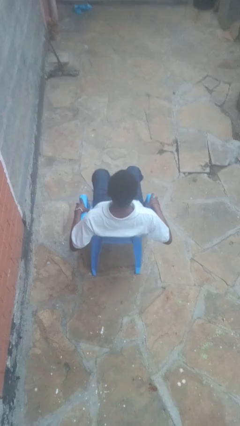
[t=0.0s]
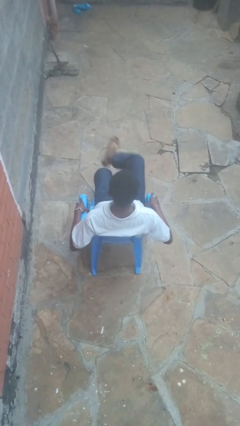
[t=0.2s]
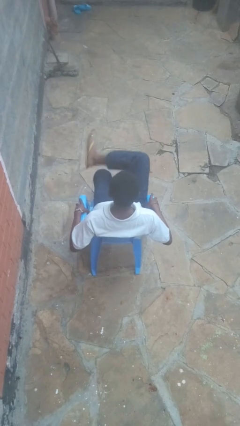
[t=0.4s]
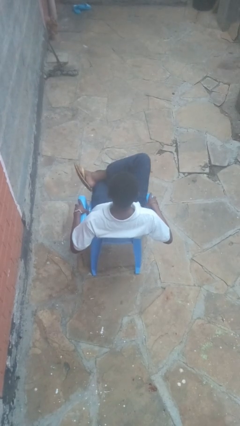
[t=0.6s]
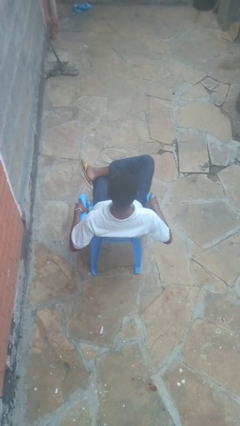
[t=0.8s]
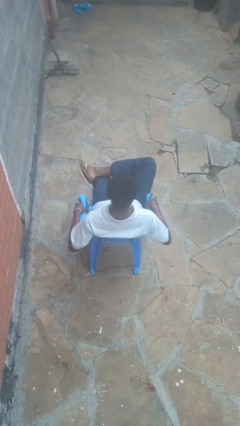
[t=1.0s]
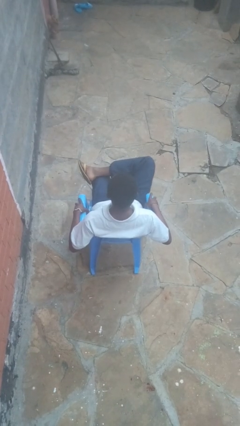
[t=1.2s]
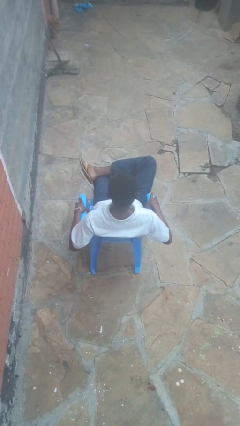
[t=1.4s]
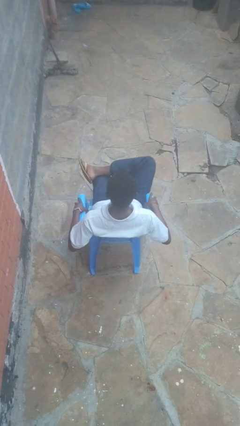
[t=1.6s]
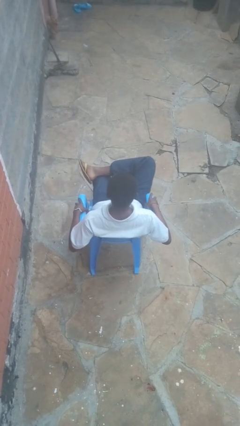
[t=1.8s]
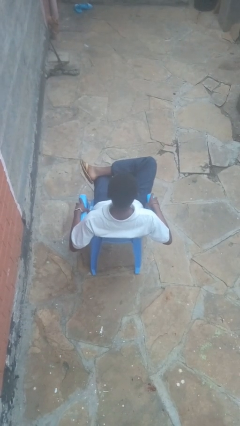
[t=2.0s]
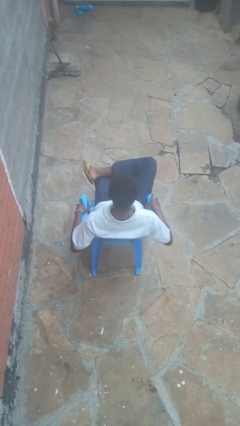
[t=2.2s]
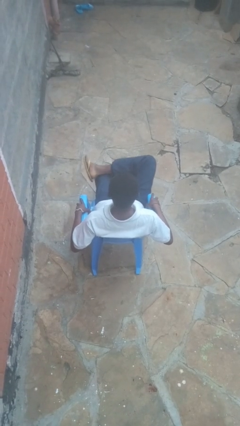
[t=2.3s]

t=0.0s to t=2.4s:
person crosses legs

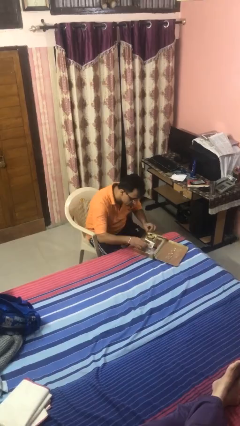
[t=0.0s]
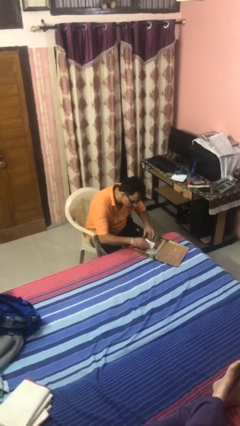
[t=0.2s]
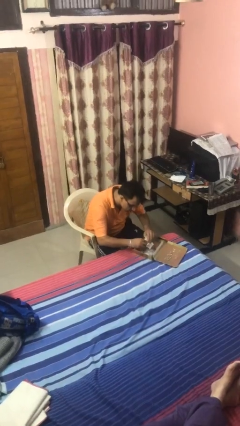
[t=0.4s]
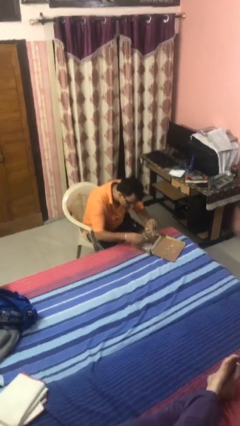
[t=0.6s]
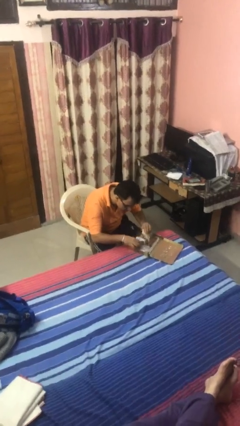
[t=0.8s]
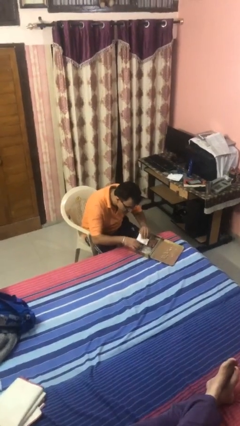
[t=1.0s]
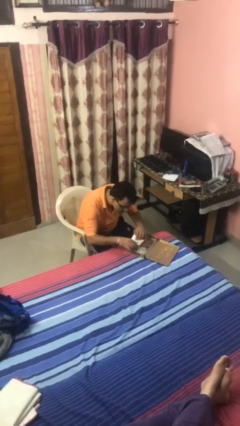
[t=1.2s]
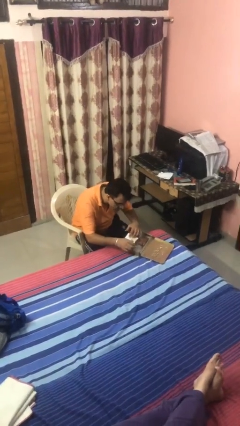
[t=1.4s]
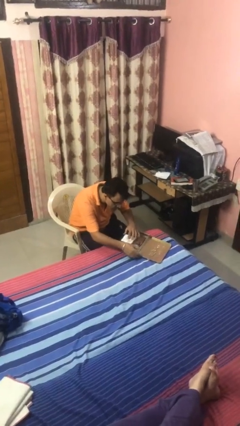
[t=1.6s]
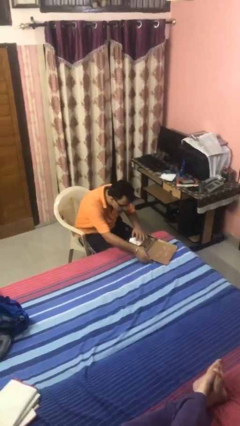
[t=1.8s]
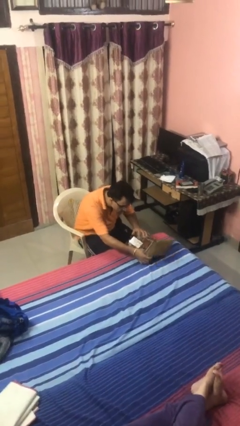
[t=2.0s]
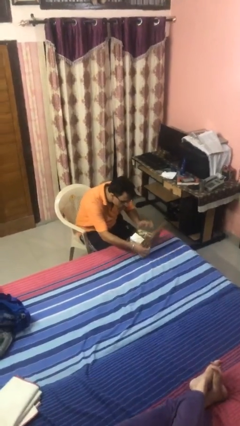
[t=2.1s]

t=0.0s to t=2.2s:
person searches jewelry box

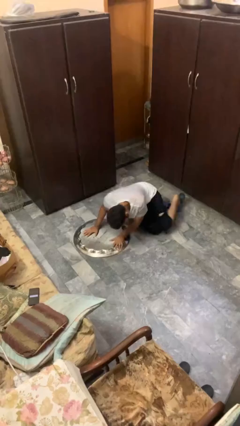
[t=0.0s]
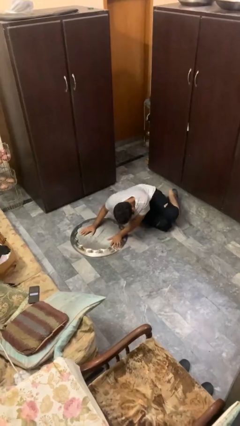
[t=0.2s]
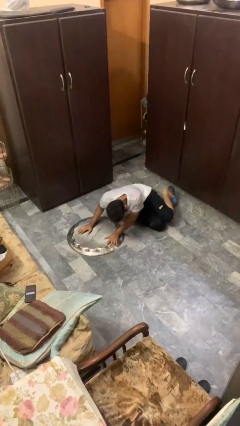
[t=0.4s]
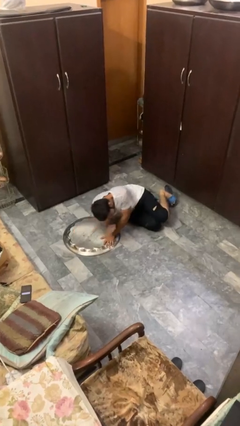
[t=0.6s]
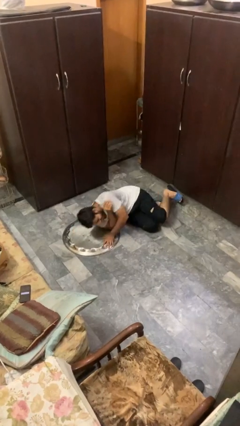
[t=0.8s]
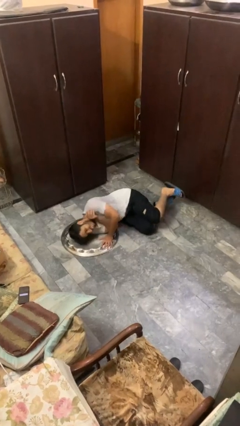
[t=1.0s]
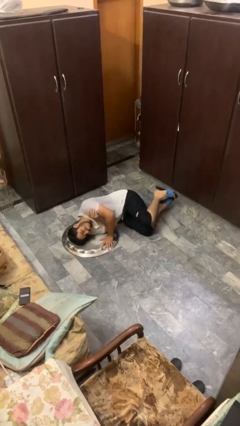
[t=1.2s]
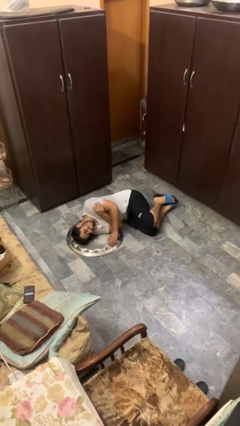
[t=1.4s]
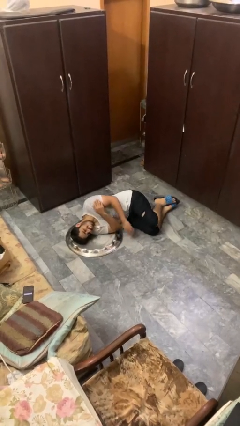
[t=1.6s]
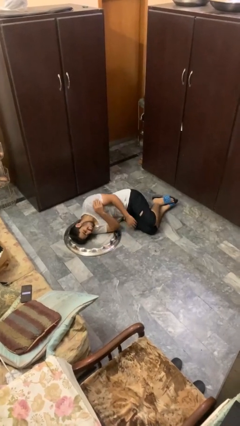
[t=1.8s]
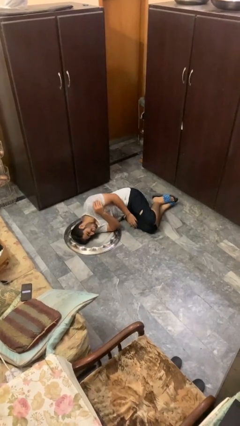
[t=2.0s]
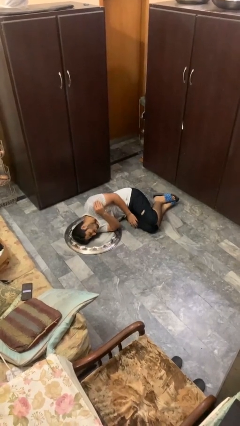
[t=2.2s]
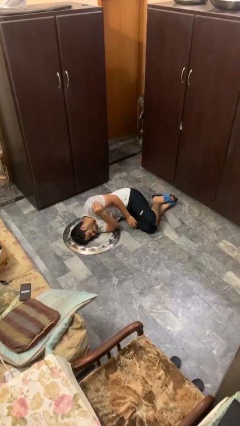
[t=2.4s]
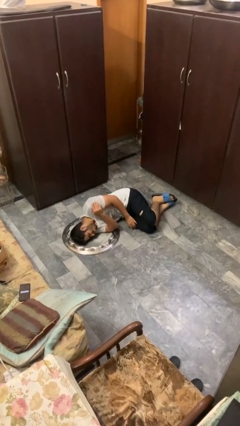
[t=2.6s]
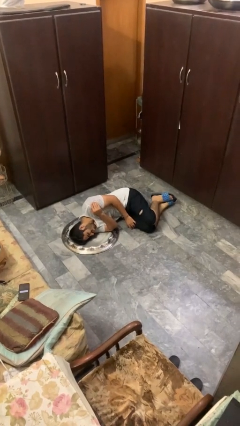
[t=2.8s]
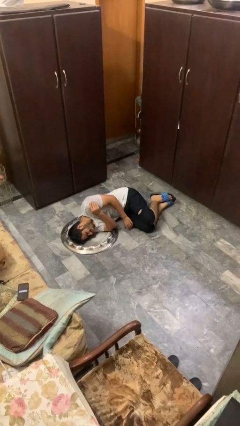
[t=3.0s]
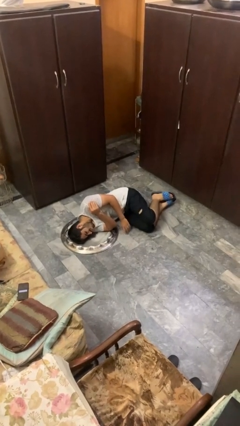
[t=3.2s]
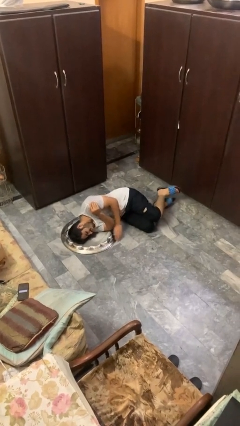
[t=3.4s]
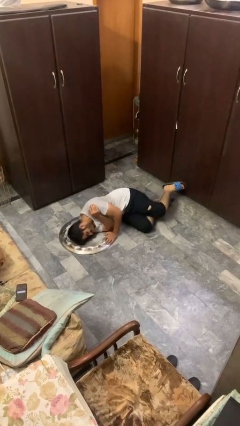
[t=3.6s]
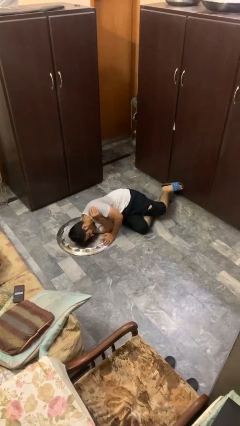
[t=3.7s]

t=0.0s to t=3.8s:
person lies down on floor

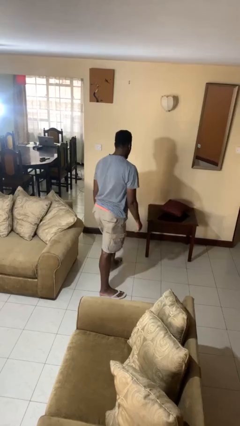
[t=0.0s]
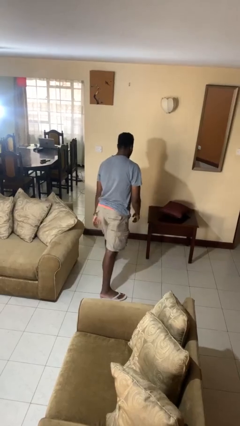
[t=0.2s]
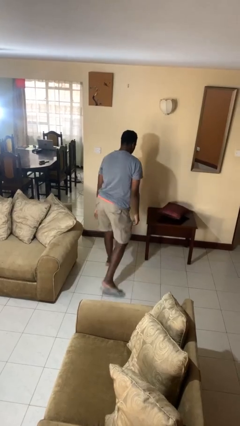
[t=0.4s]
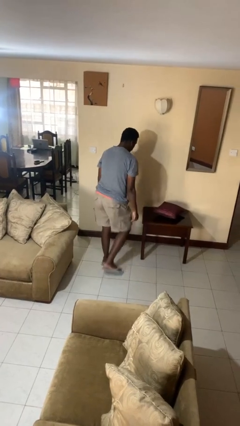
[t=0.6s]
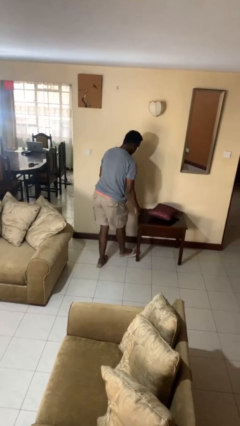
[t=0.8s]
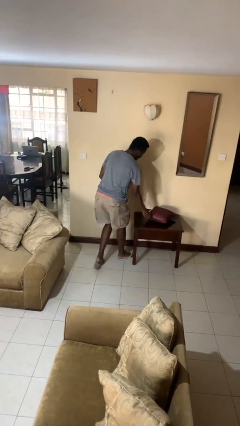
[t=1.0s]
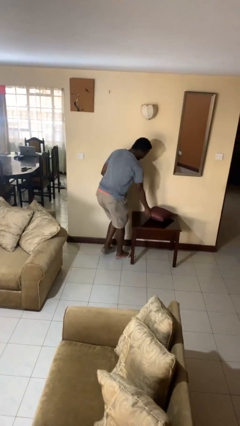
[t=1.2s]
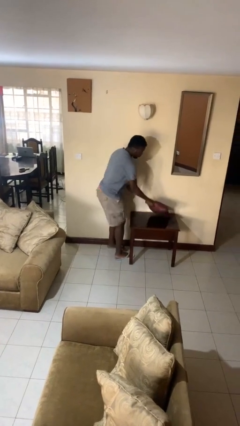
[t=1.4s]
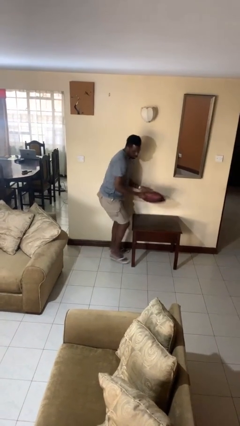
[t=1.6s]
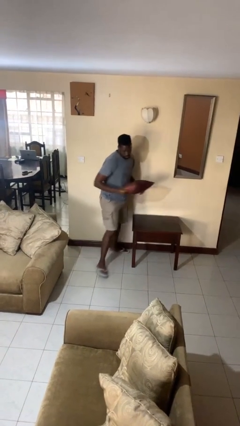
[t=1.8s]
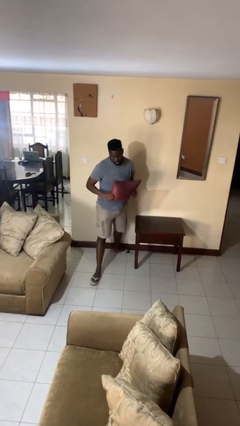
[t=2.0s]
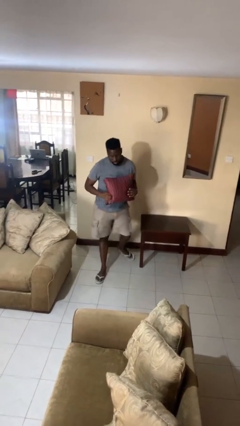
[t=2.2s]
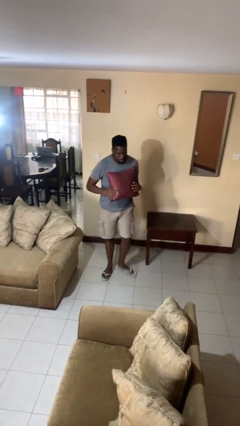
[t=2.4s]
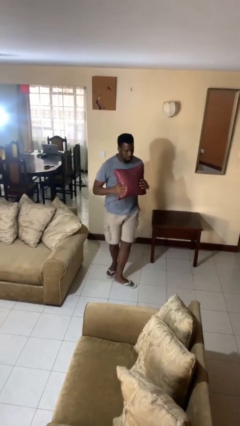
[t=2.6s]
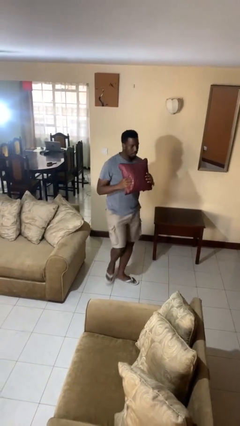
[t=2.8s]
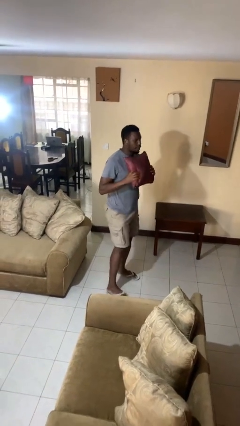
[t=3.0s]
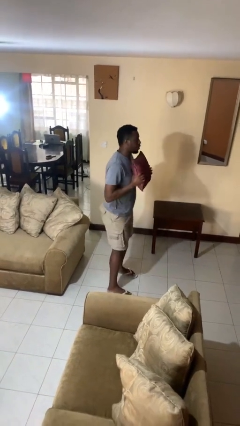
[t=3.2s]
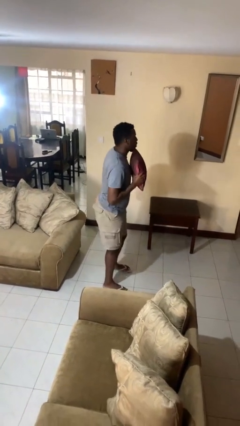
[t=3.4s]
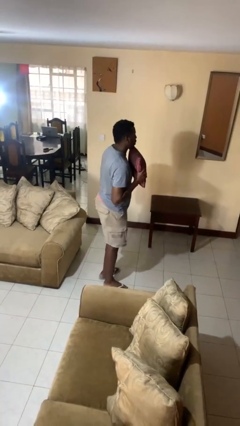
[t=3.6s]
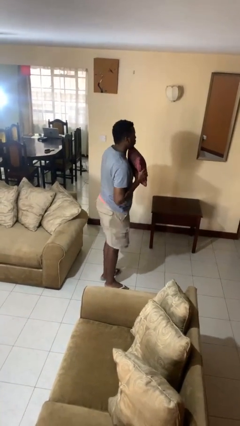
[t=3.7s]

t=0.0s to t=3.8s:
person picks up object from table

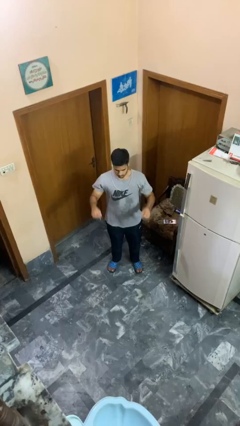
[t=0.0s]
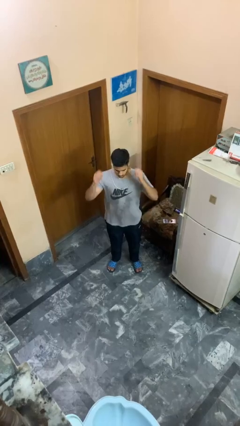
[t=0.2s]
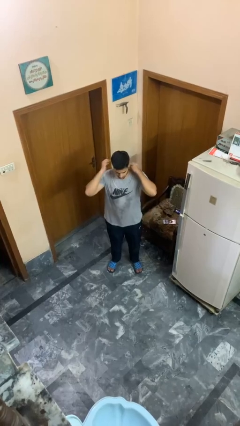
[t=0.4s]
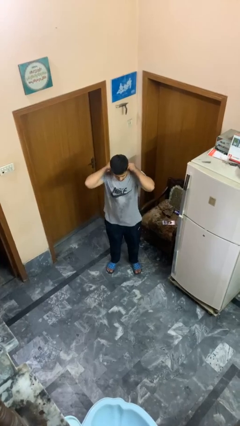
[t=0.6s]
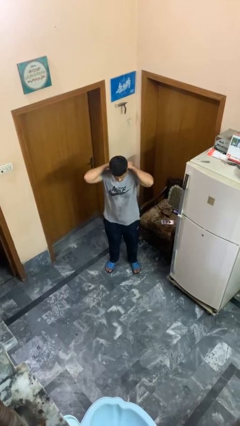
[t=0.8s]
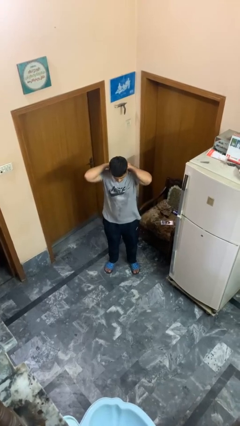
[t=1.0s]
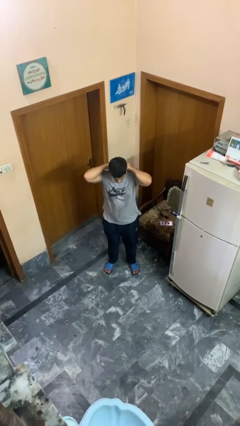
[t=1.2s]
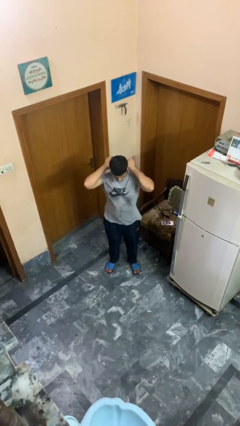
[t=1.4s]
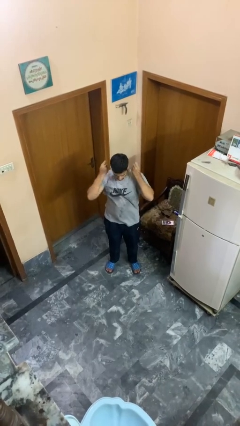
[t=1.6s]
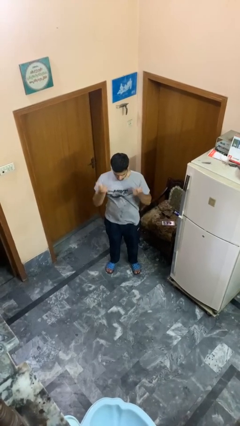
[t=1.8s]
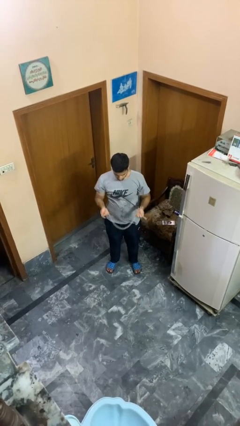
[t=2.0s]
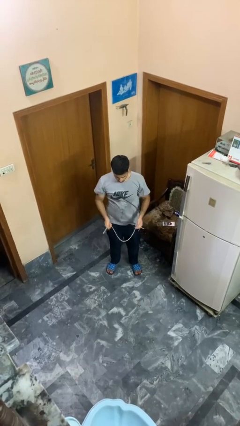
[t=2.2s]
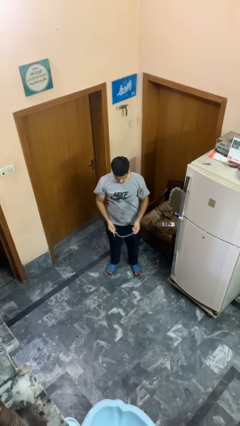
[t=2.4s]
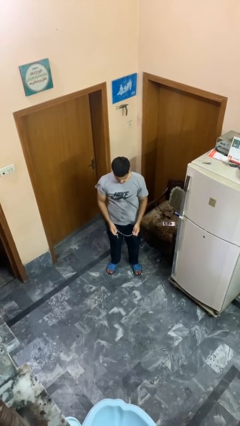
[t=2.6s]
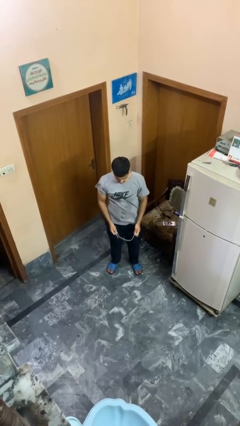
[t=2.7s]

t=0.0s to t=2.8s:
person takes off necklace

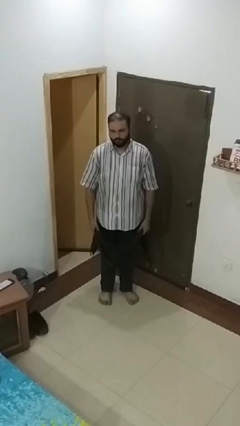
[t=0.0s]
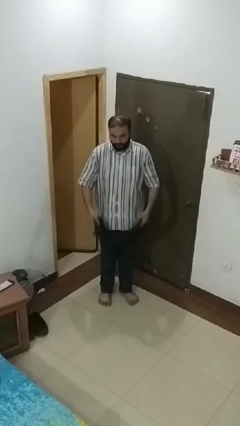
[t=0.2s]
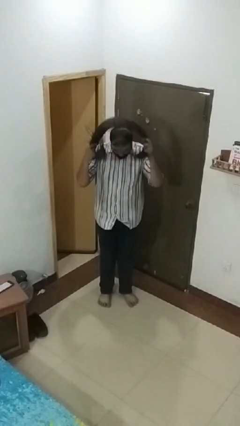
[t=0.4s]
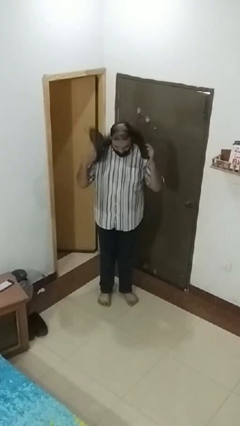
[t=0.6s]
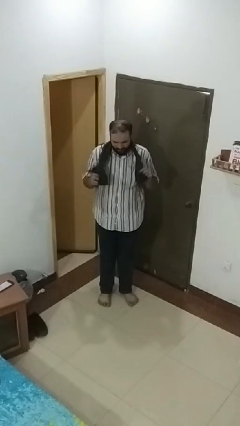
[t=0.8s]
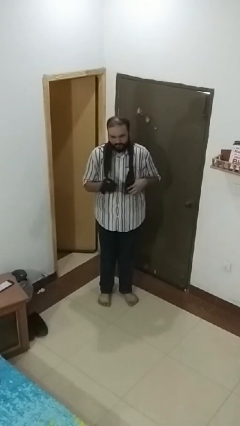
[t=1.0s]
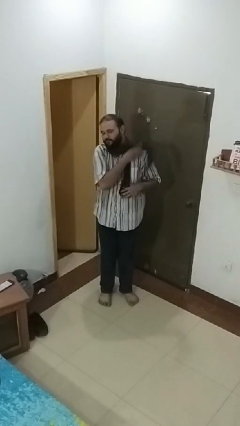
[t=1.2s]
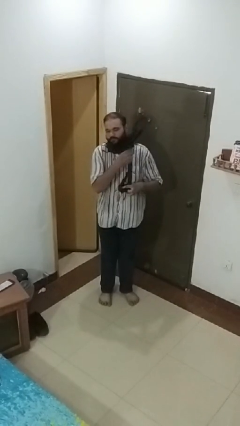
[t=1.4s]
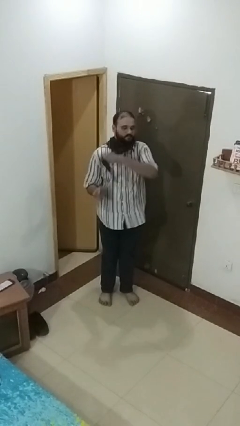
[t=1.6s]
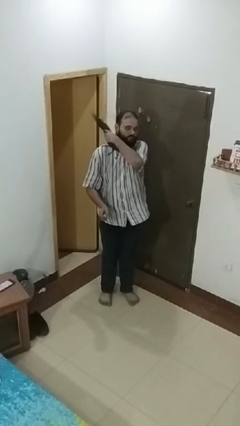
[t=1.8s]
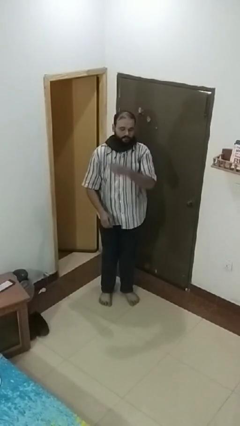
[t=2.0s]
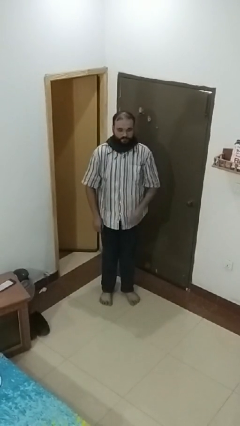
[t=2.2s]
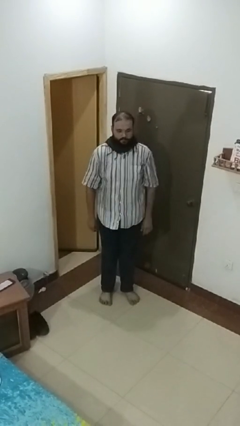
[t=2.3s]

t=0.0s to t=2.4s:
person puts on scarf
